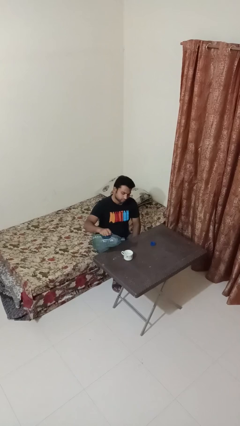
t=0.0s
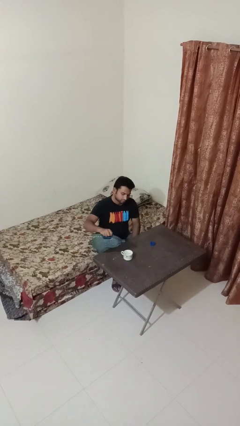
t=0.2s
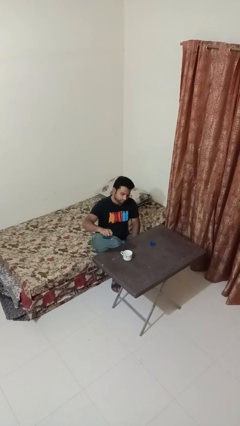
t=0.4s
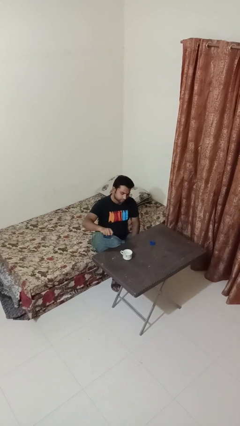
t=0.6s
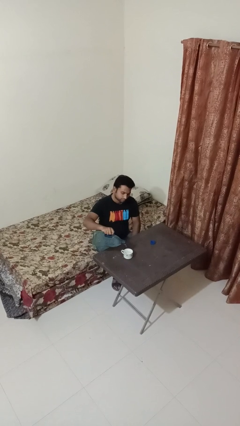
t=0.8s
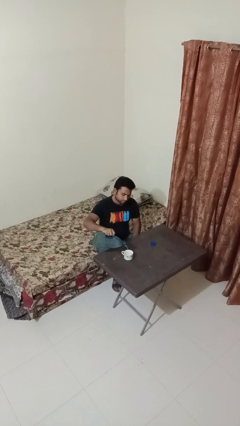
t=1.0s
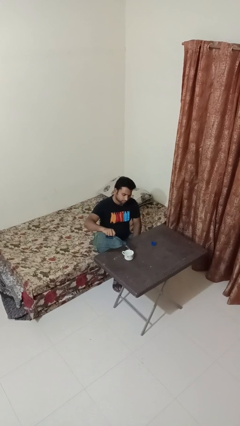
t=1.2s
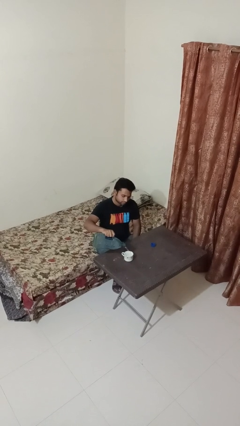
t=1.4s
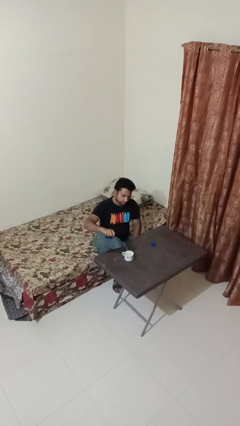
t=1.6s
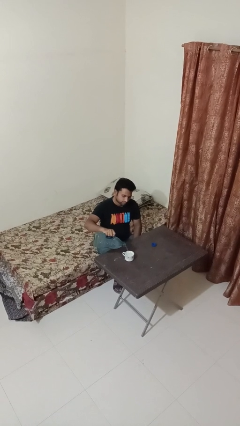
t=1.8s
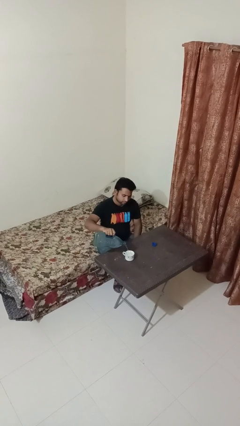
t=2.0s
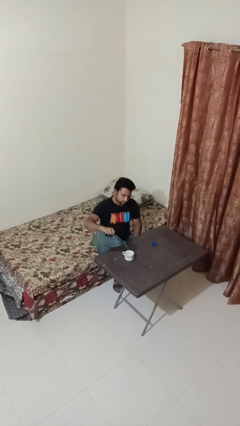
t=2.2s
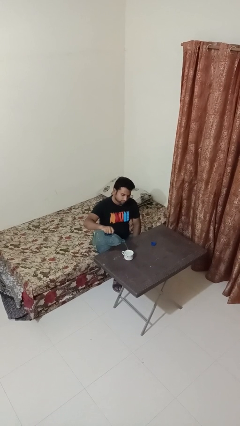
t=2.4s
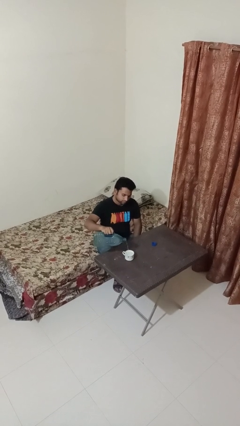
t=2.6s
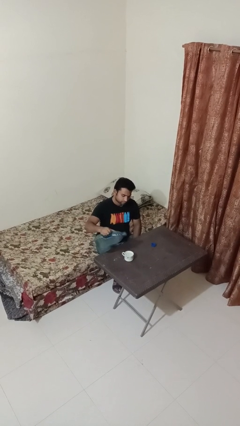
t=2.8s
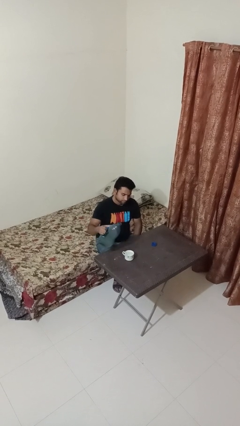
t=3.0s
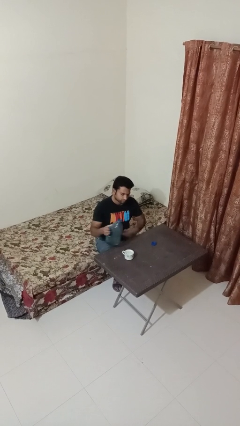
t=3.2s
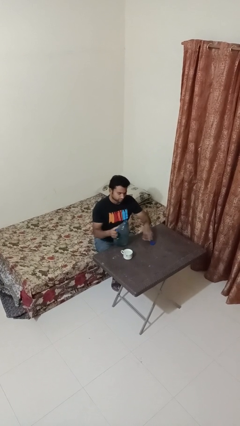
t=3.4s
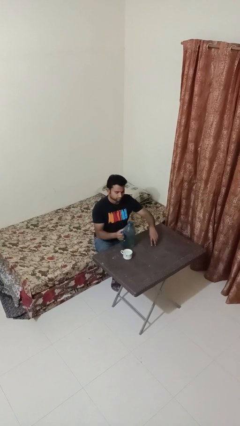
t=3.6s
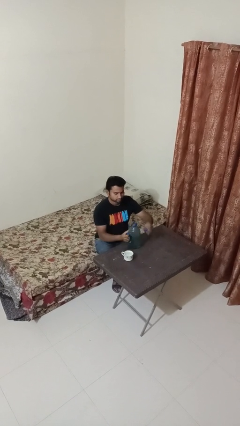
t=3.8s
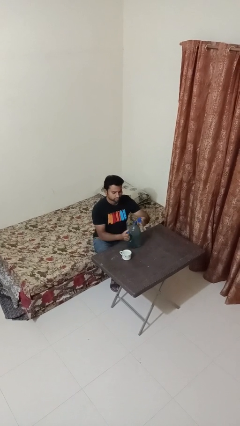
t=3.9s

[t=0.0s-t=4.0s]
person pours liquid into cup

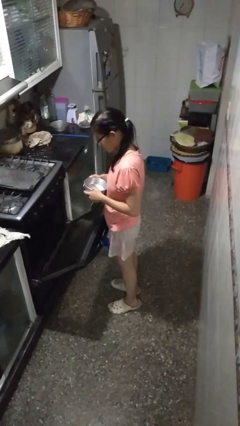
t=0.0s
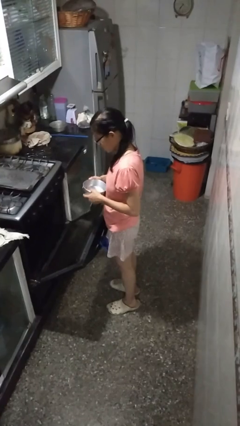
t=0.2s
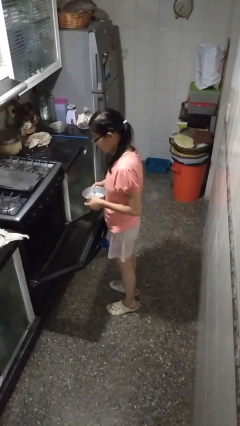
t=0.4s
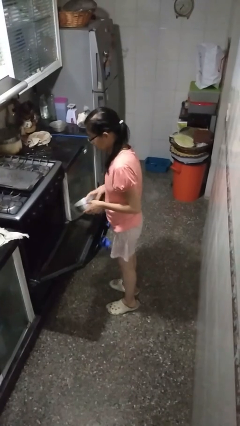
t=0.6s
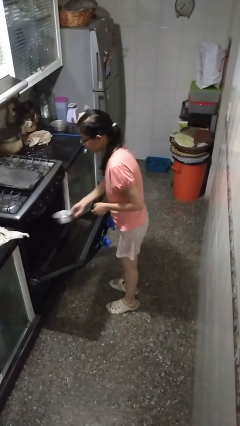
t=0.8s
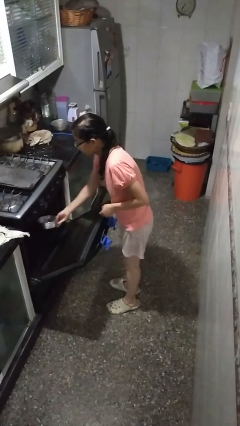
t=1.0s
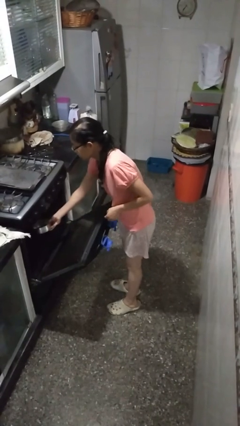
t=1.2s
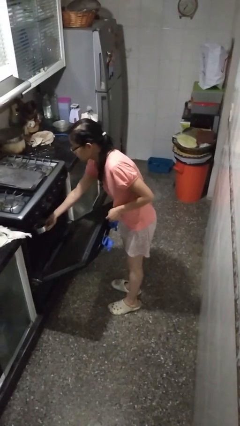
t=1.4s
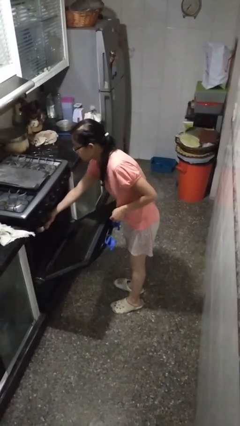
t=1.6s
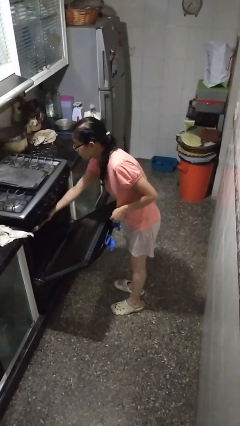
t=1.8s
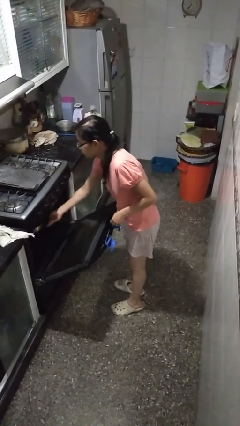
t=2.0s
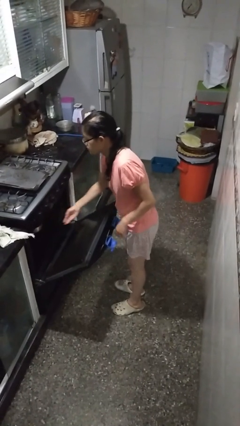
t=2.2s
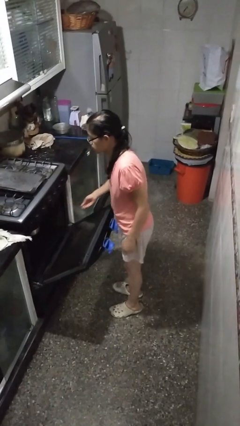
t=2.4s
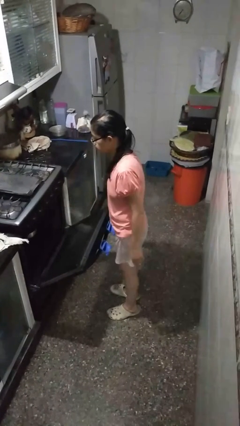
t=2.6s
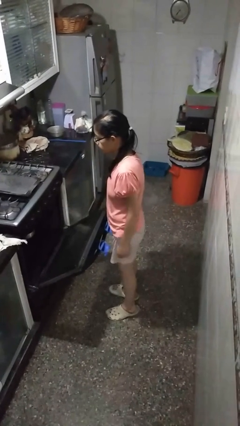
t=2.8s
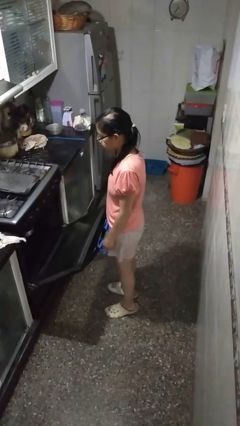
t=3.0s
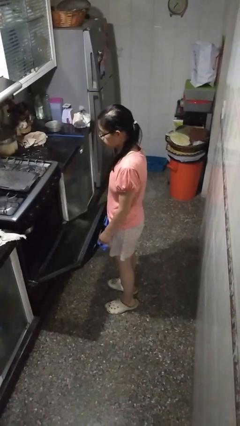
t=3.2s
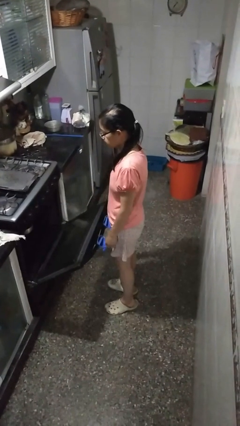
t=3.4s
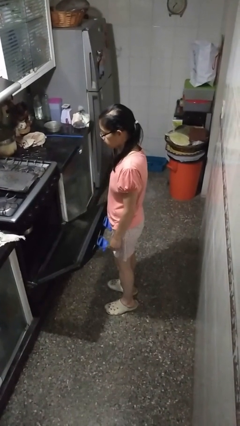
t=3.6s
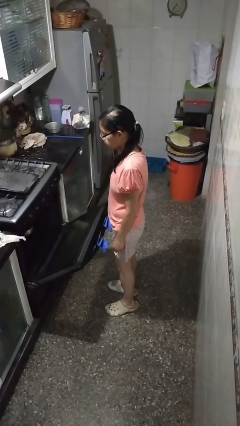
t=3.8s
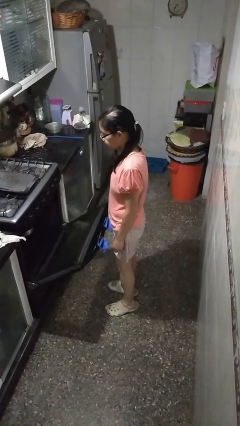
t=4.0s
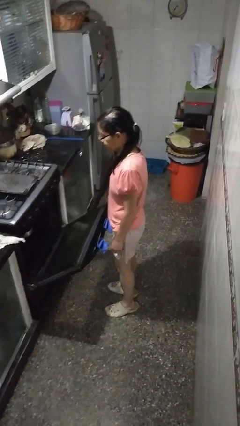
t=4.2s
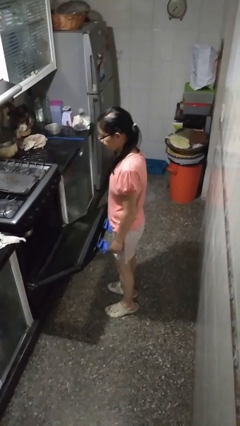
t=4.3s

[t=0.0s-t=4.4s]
person puts object into oven

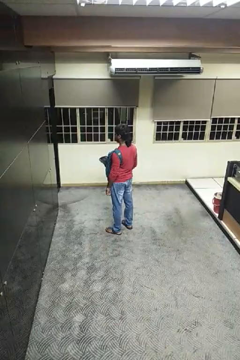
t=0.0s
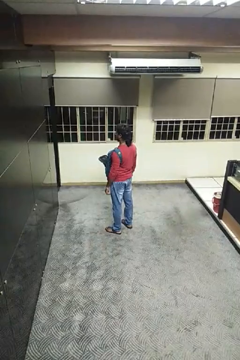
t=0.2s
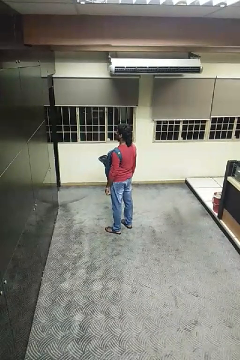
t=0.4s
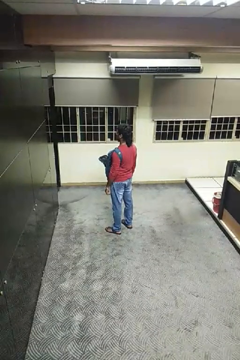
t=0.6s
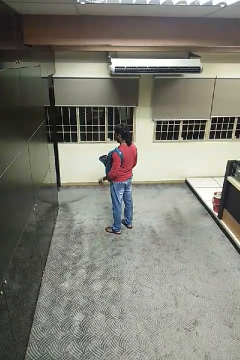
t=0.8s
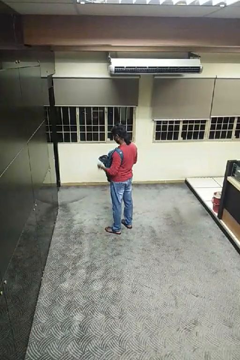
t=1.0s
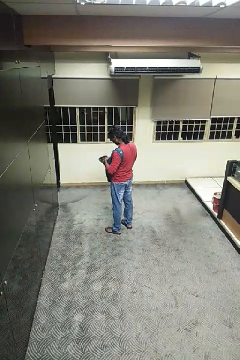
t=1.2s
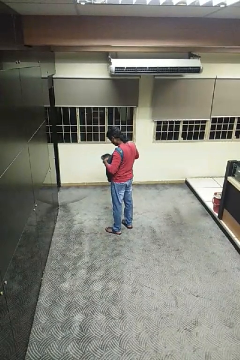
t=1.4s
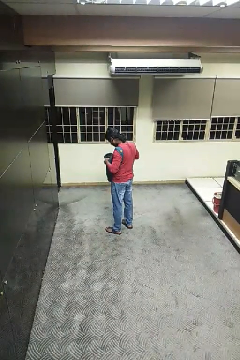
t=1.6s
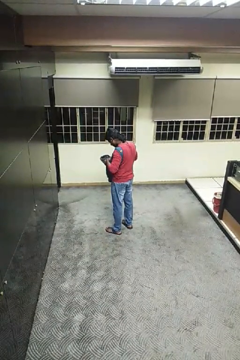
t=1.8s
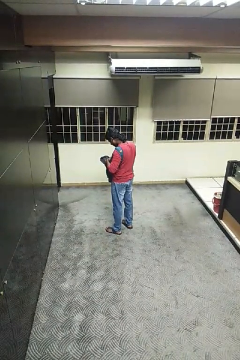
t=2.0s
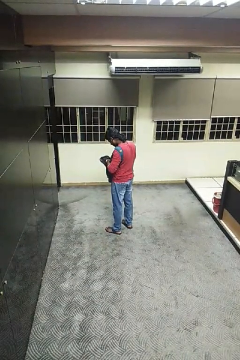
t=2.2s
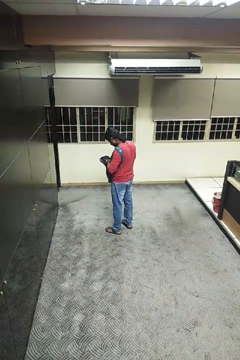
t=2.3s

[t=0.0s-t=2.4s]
person searches in backpack

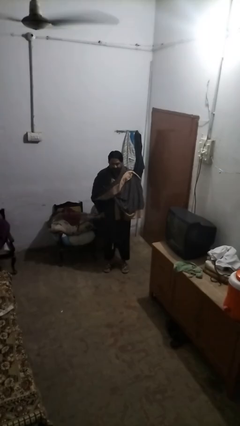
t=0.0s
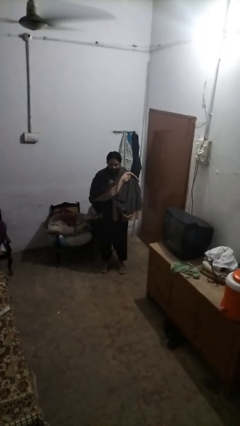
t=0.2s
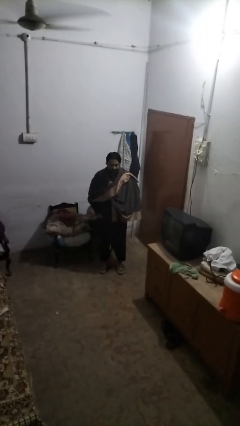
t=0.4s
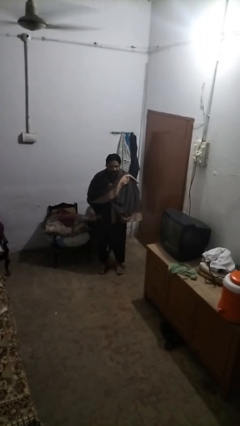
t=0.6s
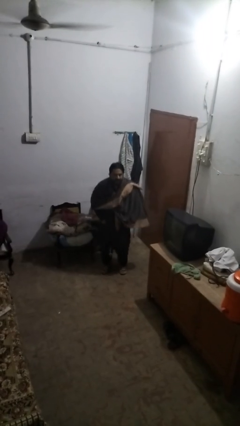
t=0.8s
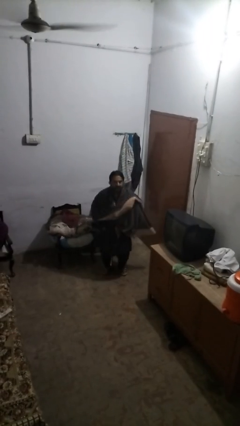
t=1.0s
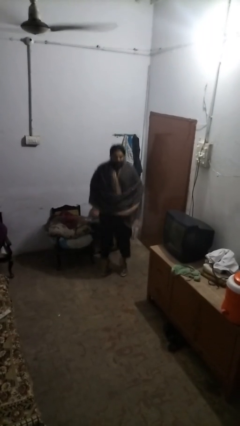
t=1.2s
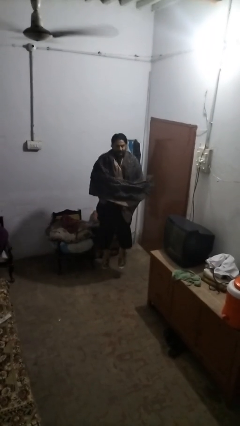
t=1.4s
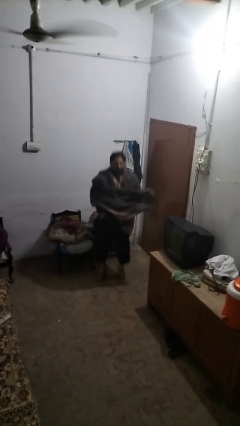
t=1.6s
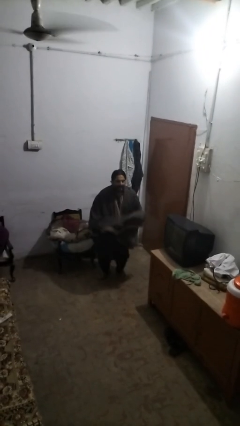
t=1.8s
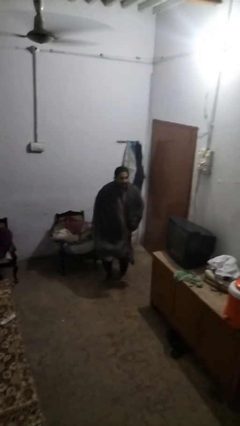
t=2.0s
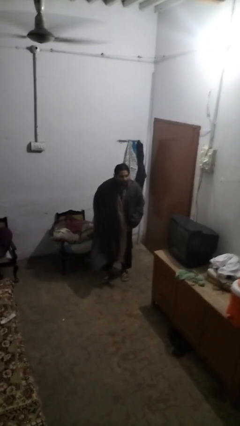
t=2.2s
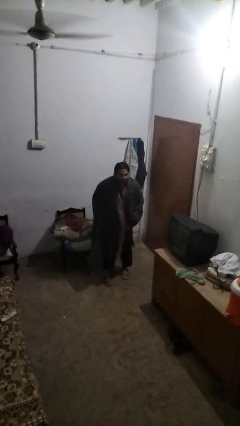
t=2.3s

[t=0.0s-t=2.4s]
person jumps

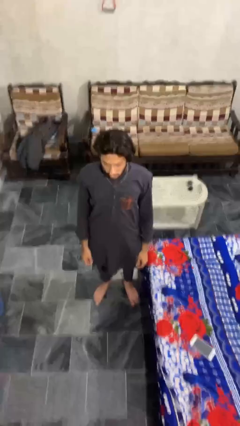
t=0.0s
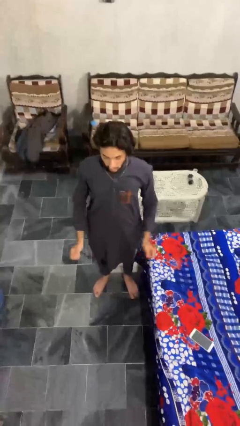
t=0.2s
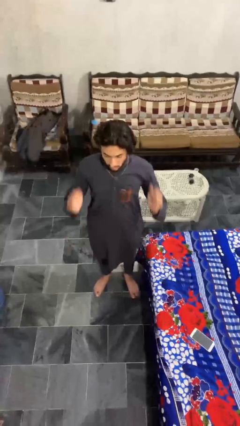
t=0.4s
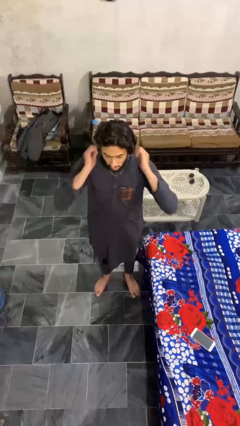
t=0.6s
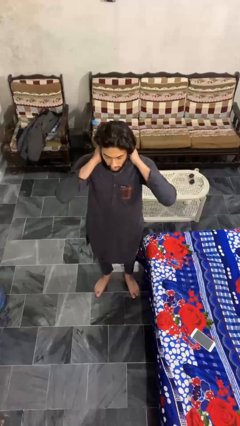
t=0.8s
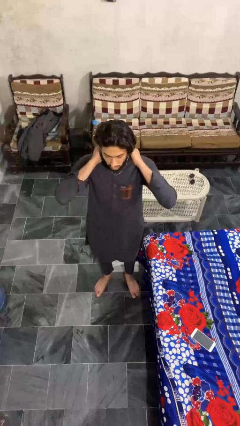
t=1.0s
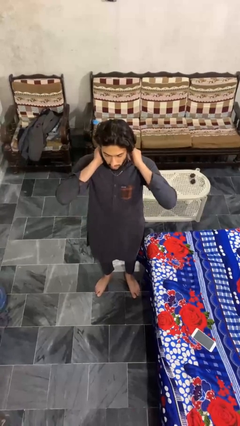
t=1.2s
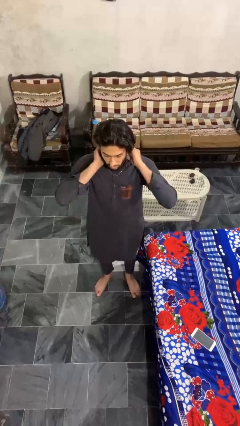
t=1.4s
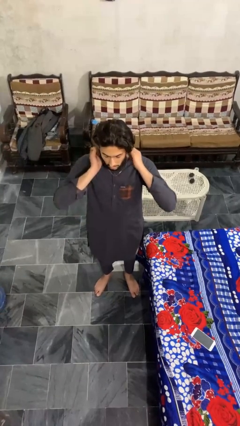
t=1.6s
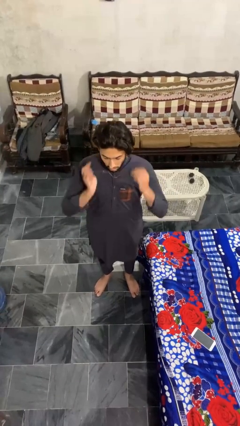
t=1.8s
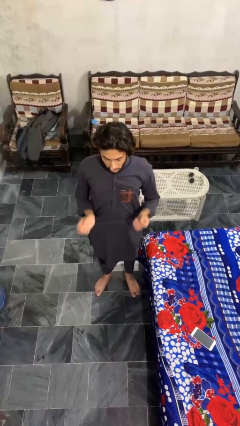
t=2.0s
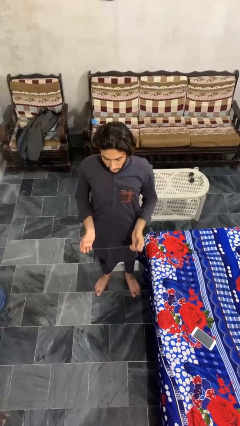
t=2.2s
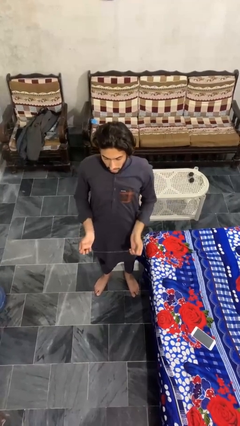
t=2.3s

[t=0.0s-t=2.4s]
person takes off necklace

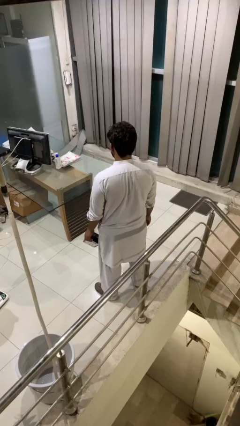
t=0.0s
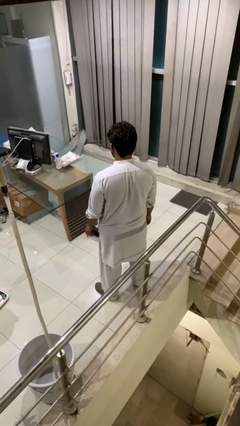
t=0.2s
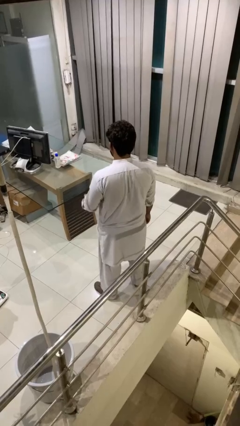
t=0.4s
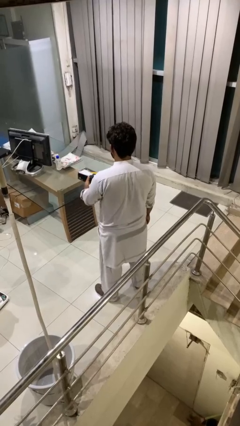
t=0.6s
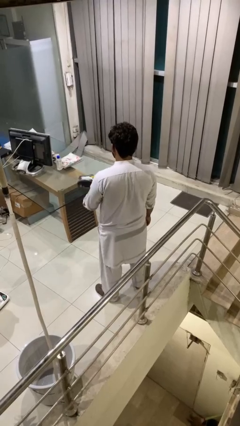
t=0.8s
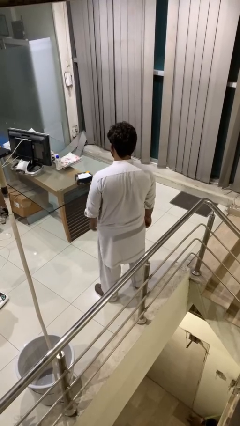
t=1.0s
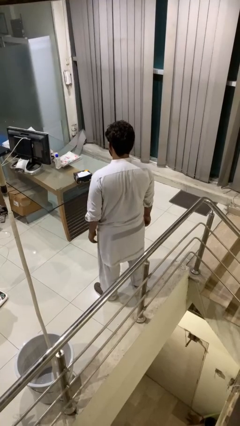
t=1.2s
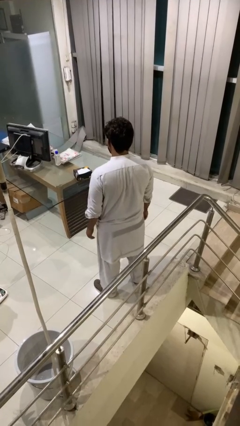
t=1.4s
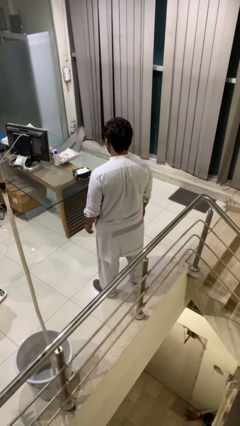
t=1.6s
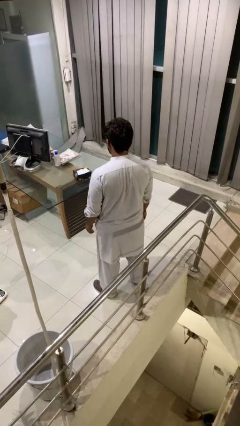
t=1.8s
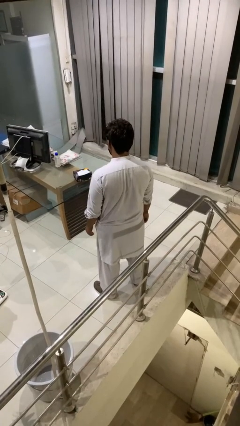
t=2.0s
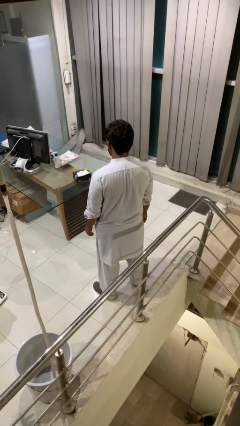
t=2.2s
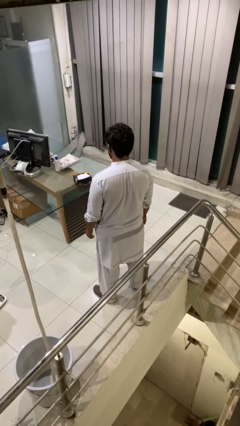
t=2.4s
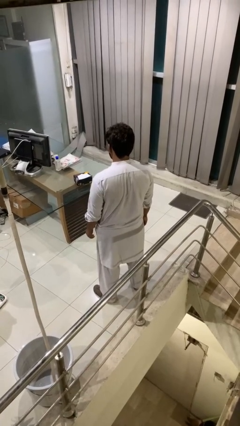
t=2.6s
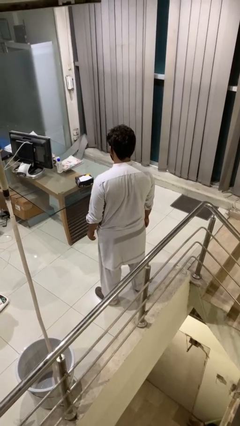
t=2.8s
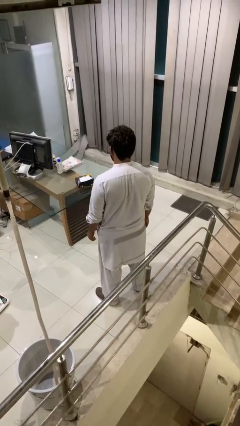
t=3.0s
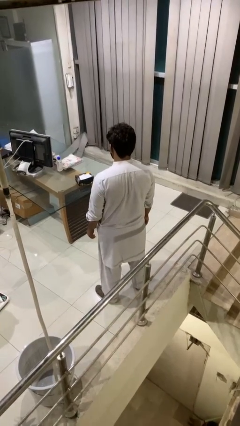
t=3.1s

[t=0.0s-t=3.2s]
person throws object on table
